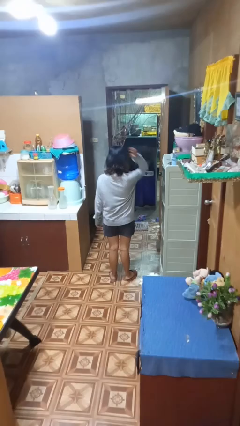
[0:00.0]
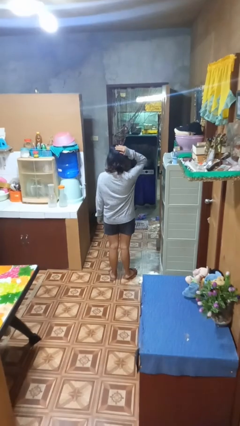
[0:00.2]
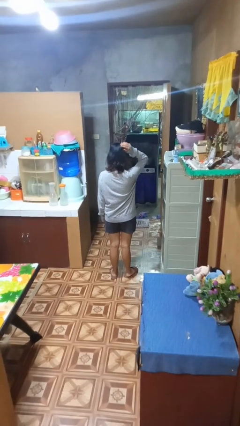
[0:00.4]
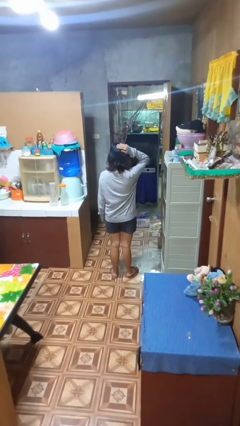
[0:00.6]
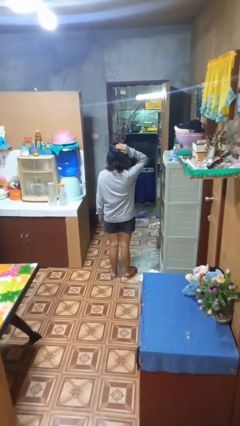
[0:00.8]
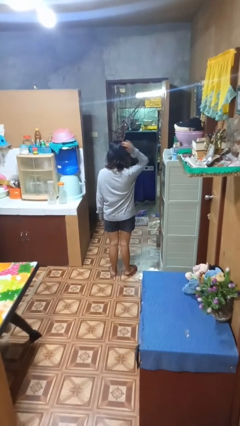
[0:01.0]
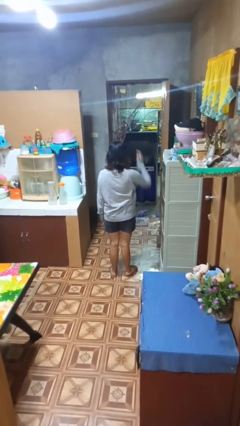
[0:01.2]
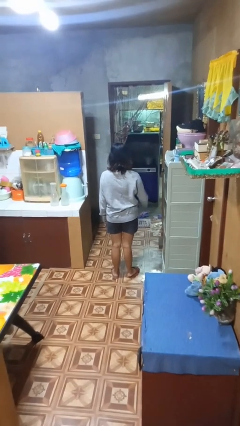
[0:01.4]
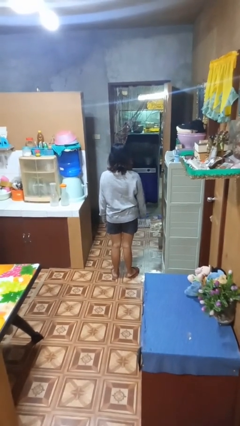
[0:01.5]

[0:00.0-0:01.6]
person pats head

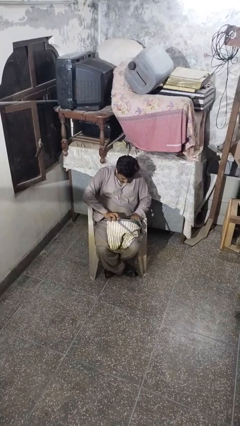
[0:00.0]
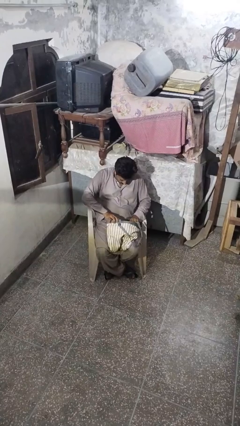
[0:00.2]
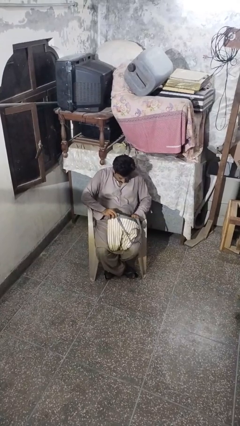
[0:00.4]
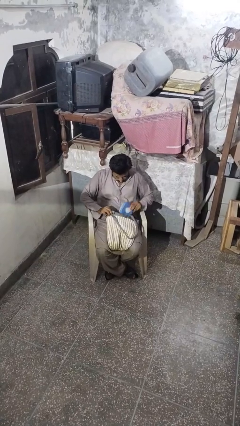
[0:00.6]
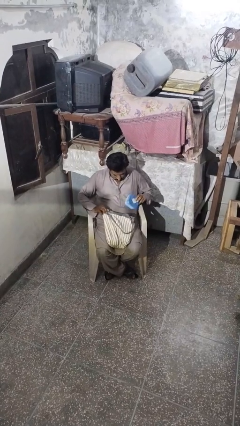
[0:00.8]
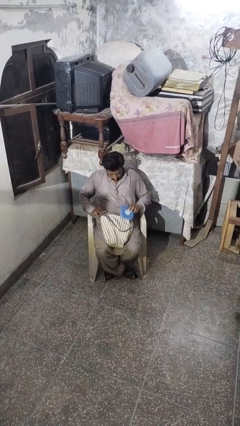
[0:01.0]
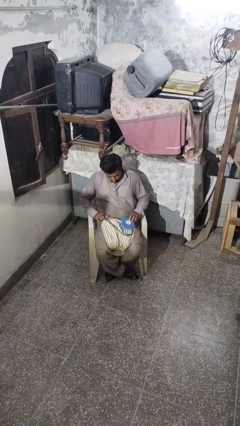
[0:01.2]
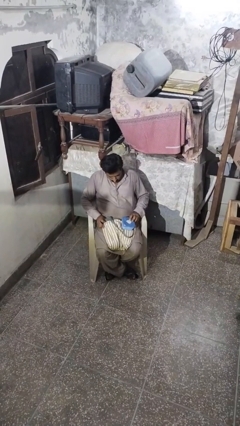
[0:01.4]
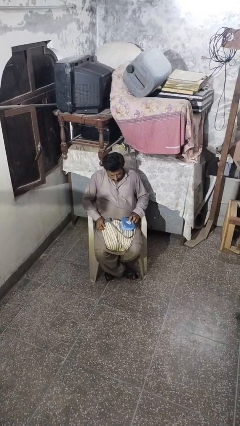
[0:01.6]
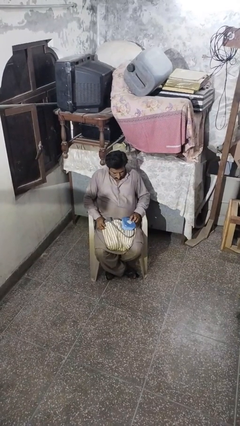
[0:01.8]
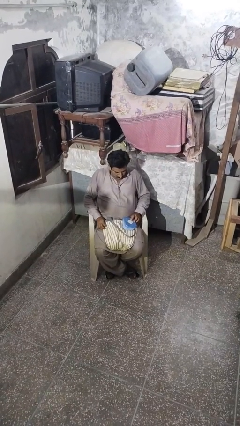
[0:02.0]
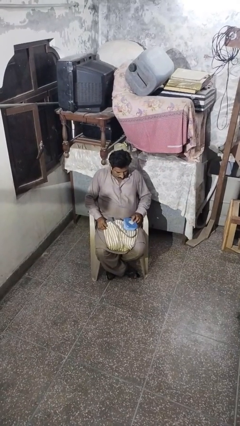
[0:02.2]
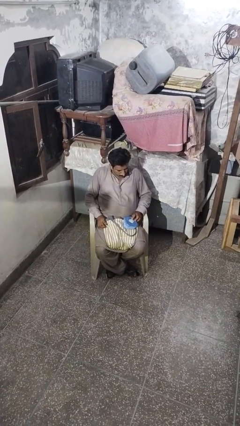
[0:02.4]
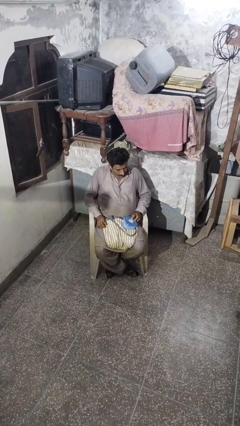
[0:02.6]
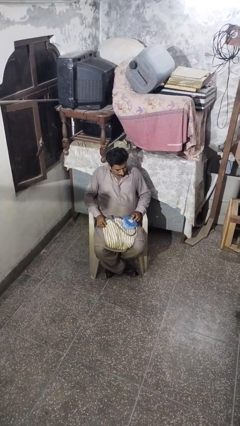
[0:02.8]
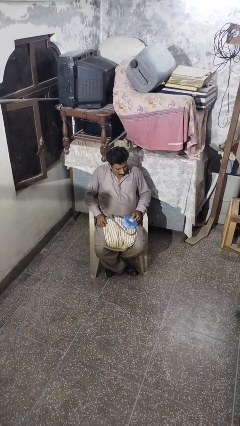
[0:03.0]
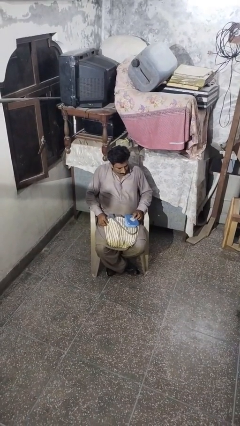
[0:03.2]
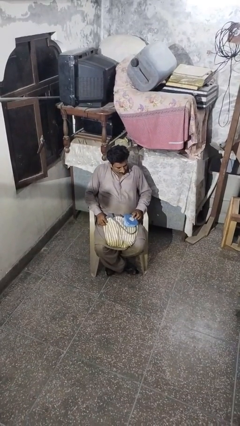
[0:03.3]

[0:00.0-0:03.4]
person takes object from backpack

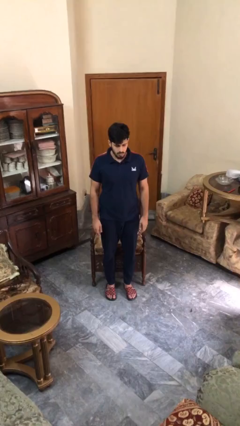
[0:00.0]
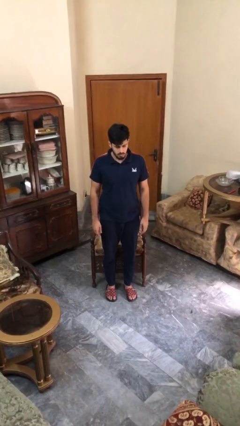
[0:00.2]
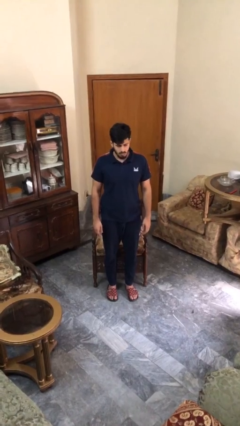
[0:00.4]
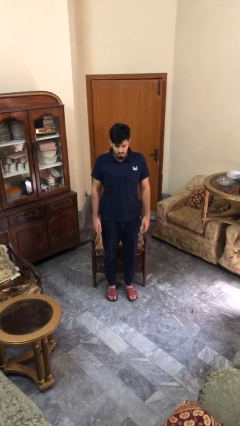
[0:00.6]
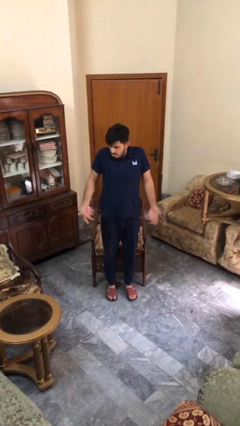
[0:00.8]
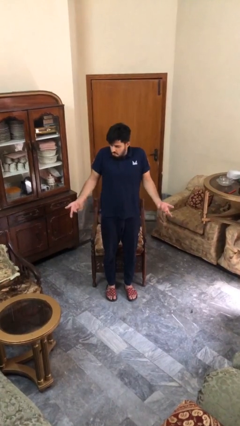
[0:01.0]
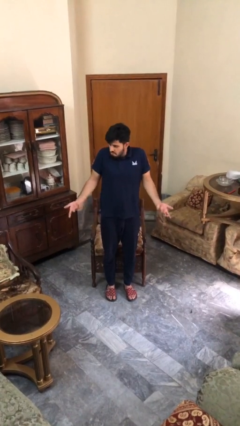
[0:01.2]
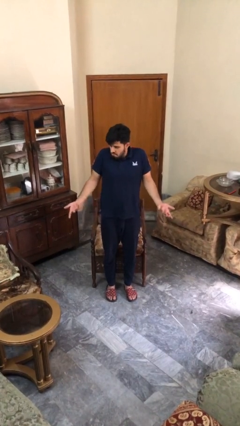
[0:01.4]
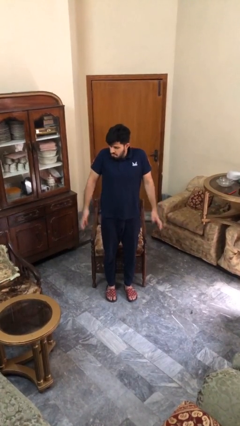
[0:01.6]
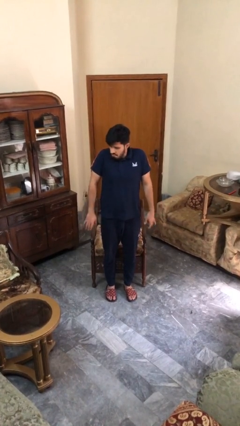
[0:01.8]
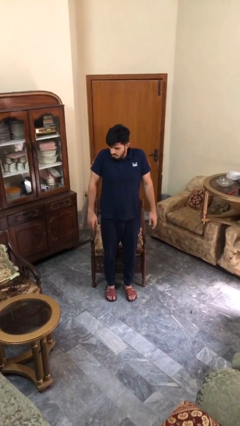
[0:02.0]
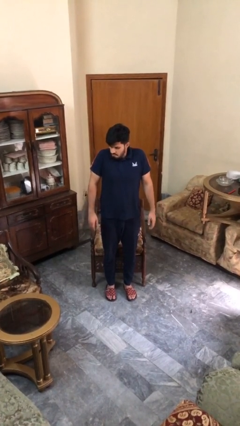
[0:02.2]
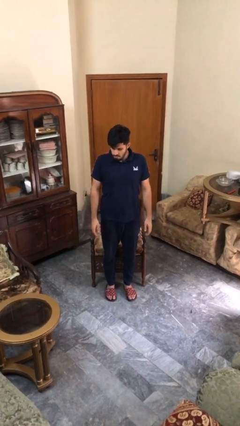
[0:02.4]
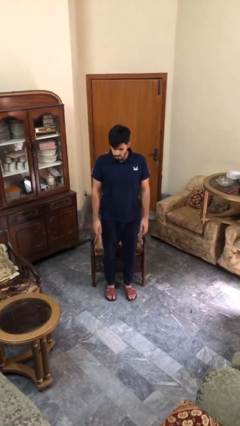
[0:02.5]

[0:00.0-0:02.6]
person shrugs

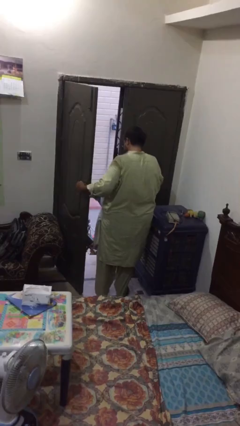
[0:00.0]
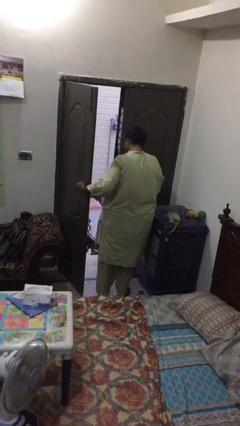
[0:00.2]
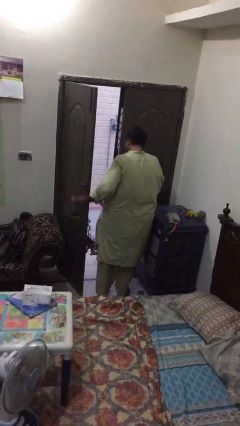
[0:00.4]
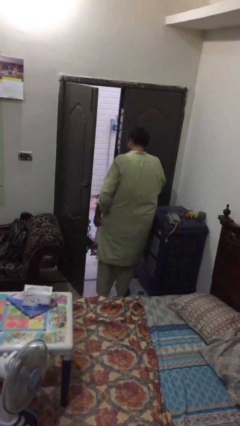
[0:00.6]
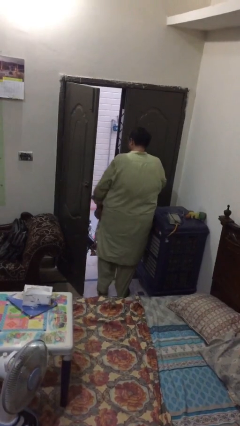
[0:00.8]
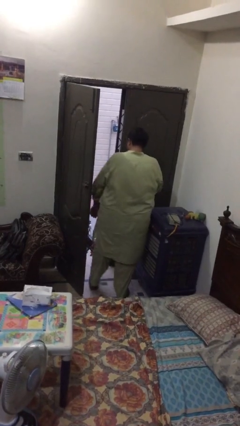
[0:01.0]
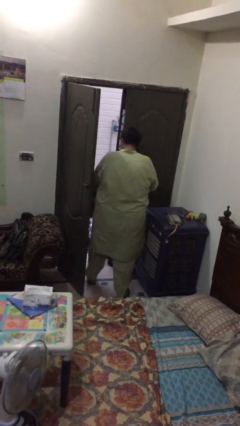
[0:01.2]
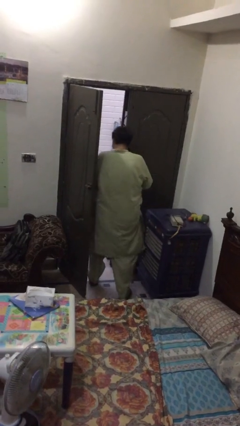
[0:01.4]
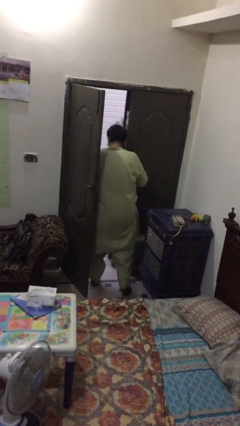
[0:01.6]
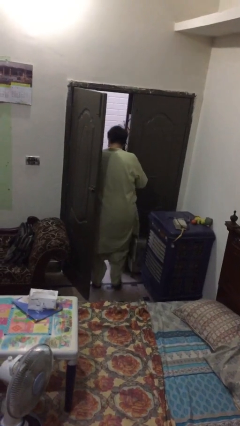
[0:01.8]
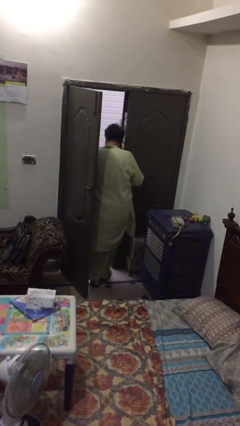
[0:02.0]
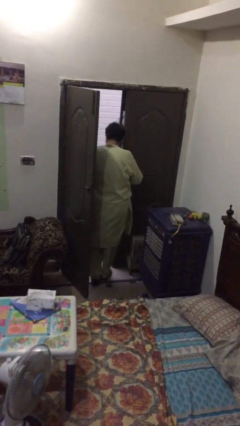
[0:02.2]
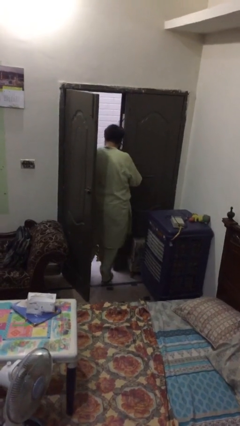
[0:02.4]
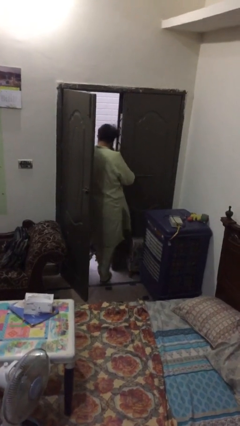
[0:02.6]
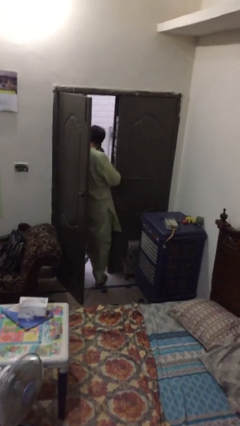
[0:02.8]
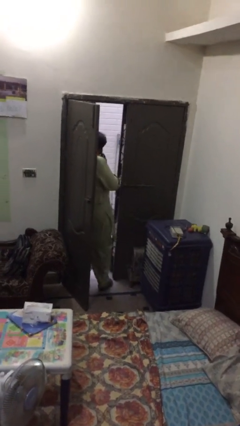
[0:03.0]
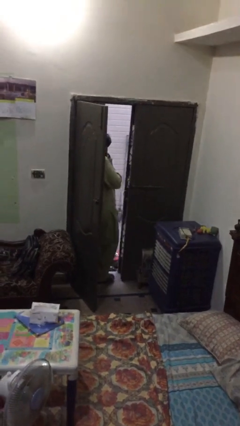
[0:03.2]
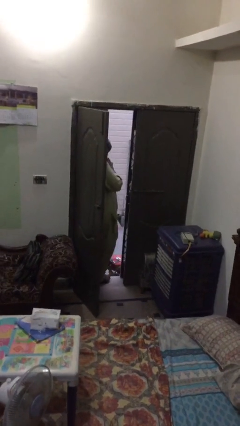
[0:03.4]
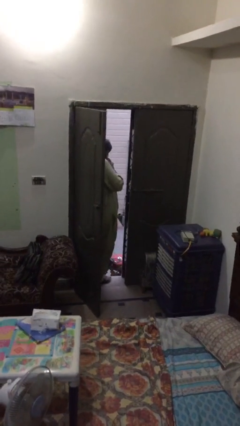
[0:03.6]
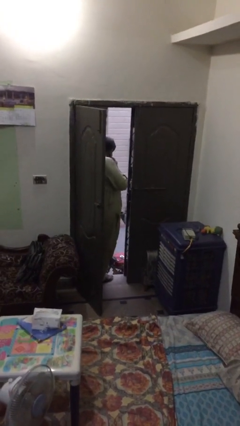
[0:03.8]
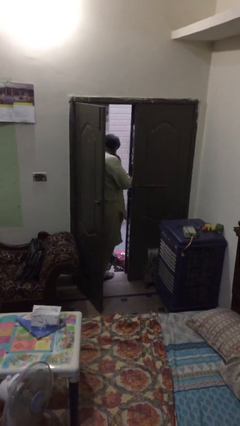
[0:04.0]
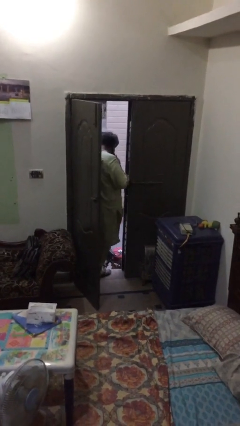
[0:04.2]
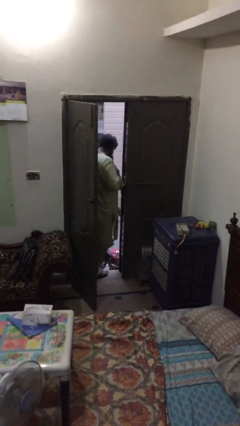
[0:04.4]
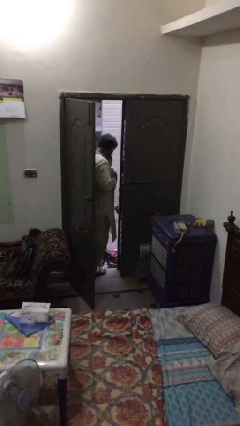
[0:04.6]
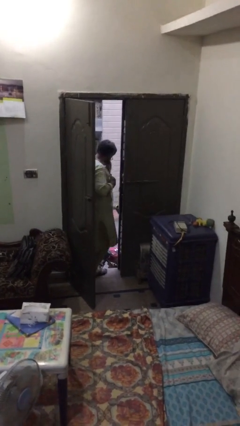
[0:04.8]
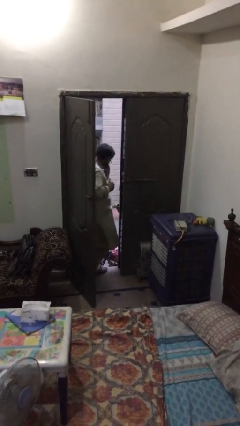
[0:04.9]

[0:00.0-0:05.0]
person exits scene through structure

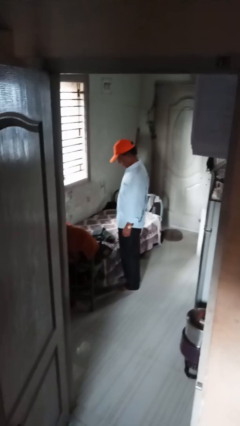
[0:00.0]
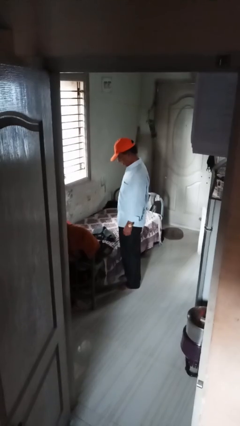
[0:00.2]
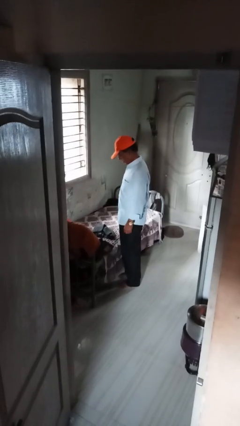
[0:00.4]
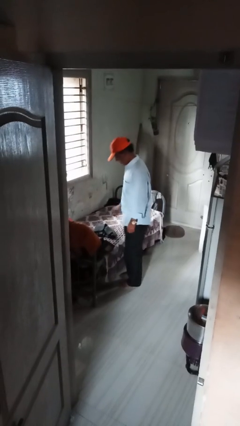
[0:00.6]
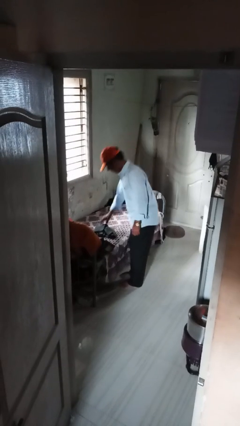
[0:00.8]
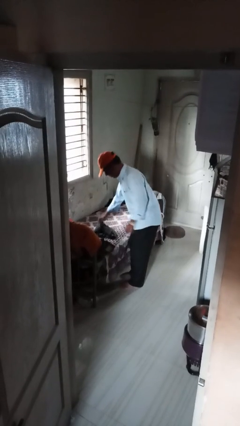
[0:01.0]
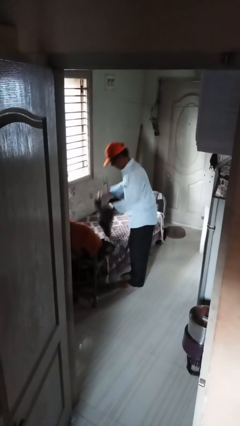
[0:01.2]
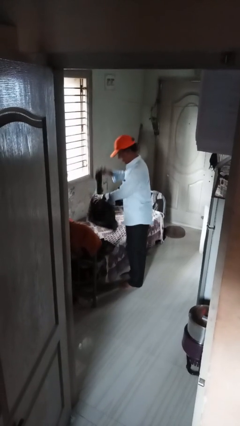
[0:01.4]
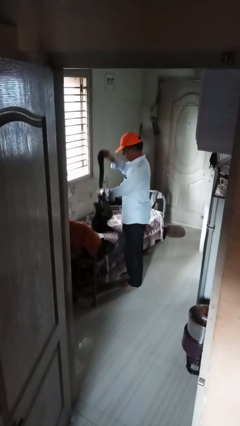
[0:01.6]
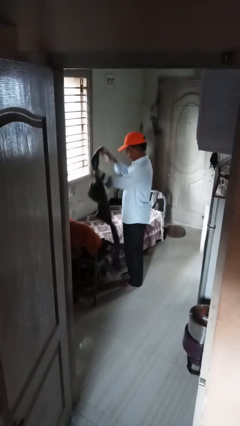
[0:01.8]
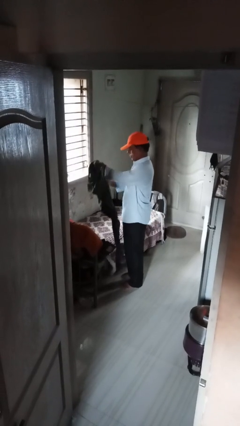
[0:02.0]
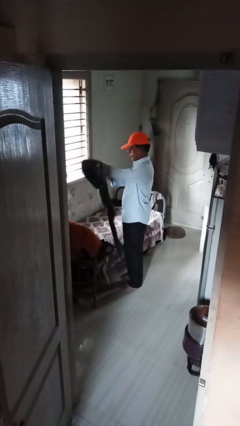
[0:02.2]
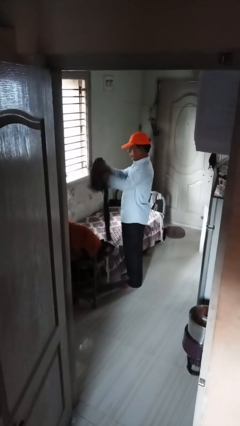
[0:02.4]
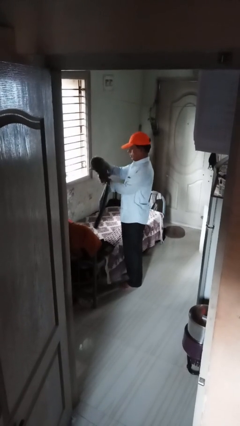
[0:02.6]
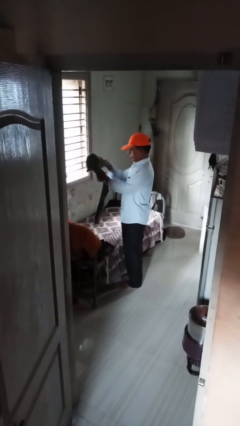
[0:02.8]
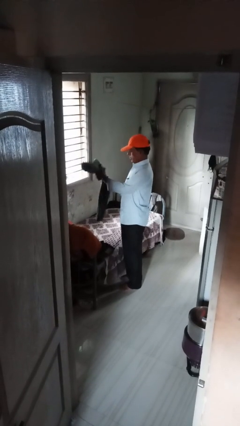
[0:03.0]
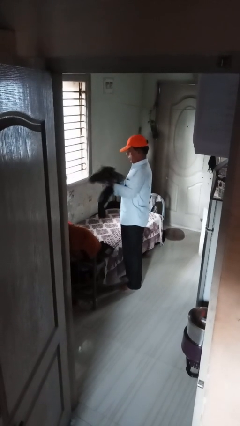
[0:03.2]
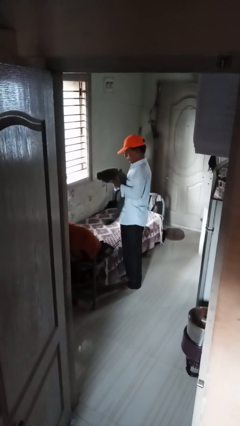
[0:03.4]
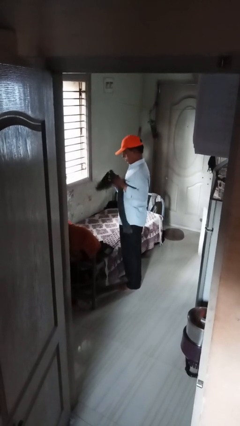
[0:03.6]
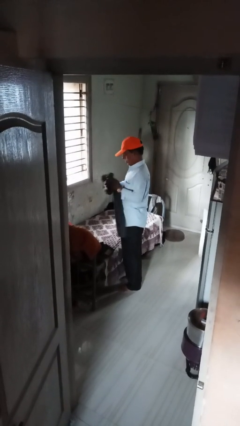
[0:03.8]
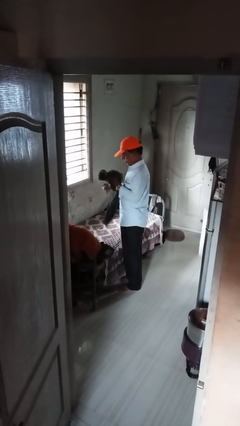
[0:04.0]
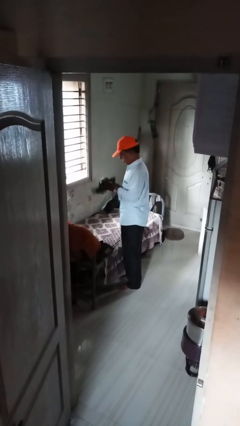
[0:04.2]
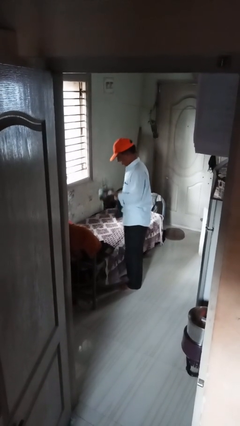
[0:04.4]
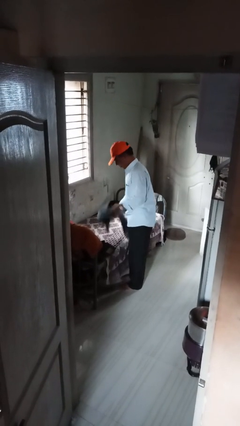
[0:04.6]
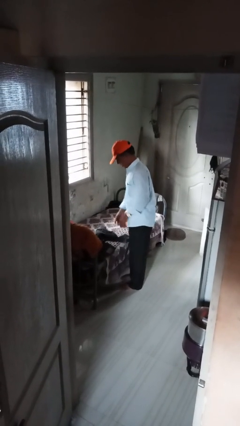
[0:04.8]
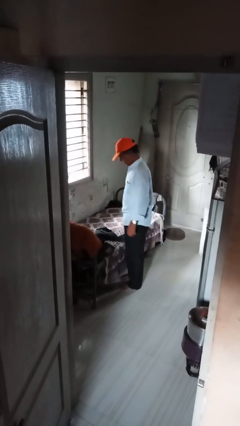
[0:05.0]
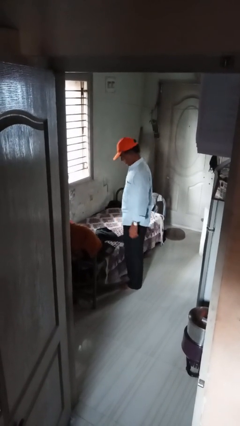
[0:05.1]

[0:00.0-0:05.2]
person folds shirt
